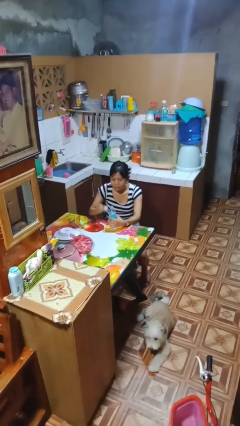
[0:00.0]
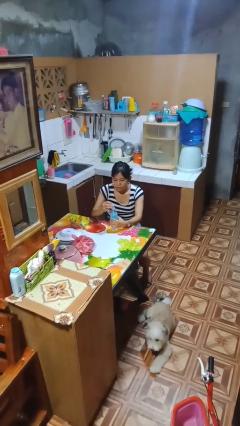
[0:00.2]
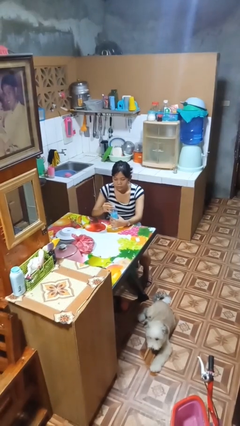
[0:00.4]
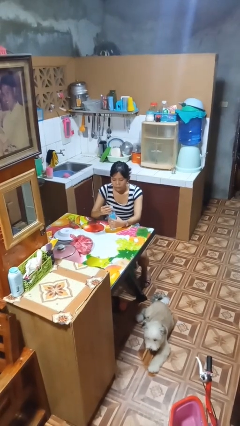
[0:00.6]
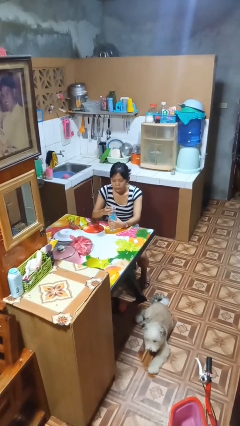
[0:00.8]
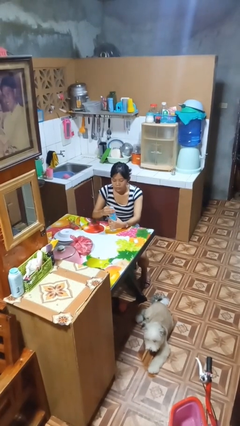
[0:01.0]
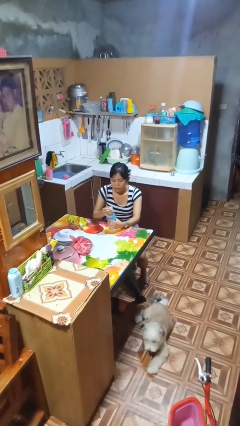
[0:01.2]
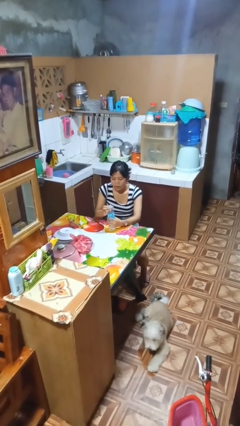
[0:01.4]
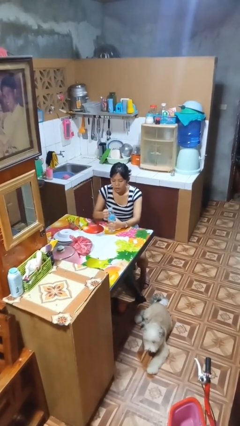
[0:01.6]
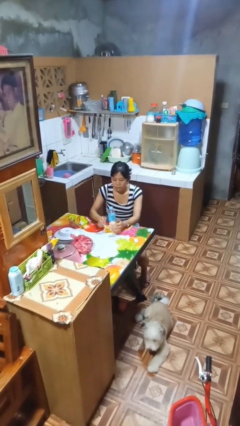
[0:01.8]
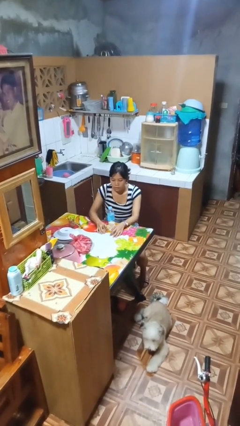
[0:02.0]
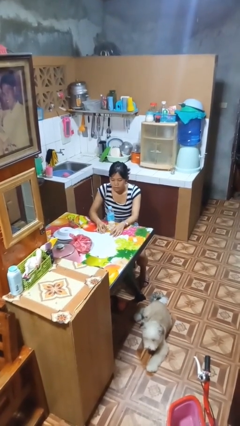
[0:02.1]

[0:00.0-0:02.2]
person screws lid to bottle

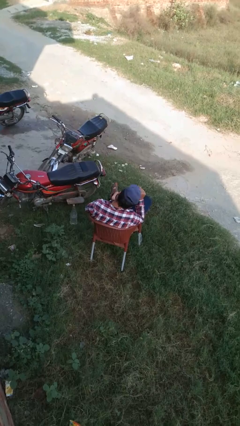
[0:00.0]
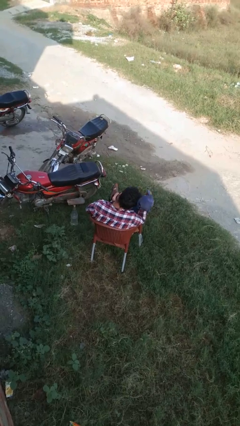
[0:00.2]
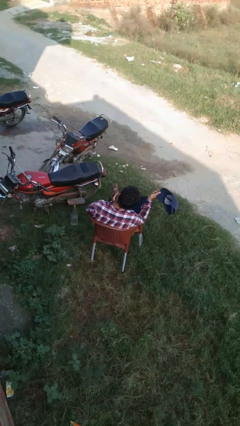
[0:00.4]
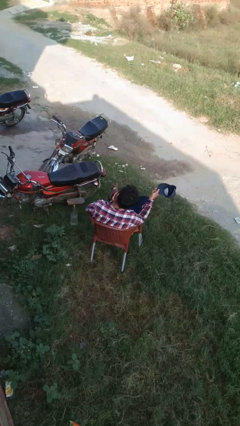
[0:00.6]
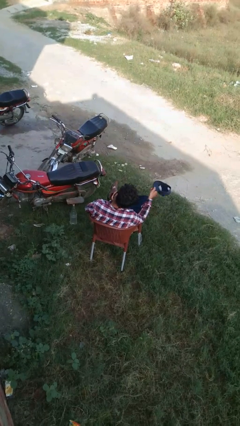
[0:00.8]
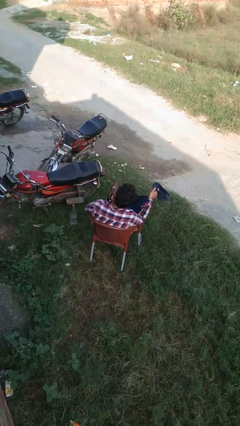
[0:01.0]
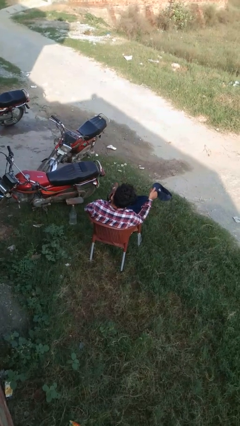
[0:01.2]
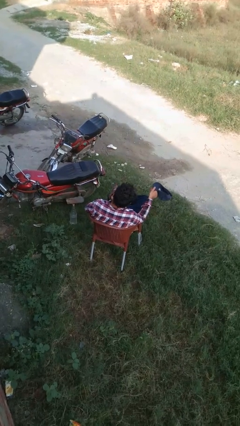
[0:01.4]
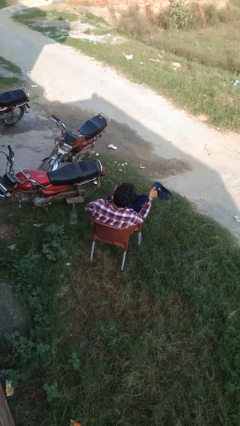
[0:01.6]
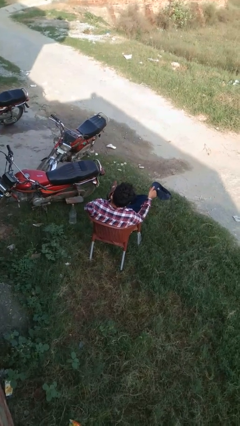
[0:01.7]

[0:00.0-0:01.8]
person takes off hat

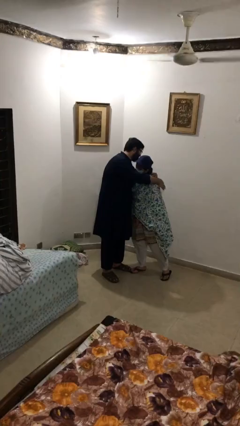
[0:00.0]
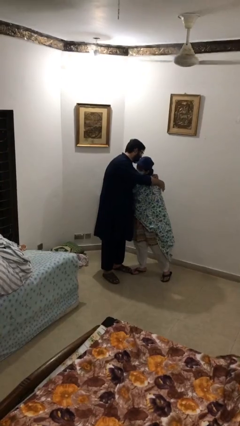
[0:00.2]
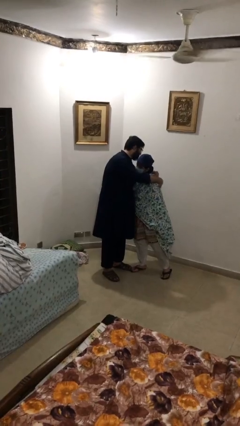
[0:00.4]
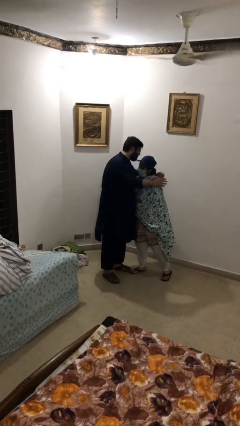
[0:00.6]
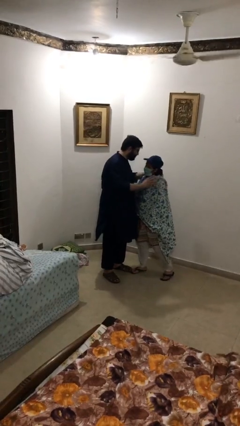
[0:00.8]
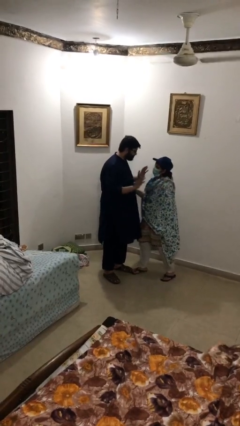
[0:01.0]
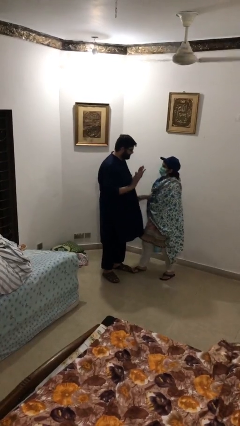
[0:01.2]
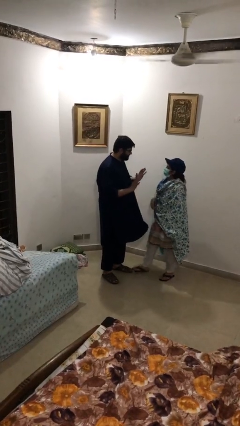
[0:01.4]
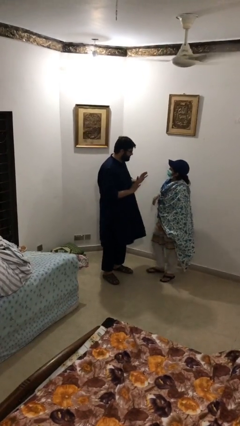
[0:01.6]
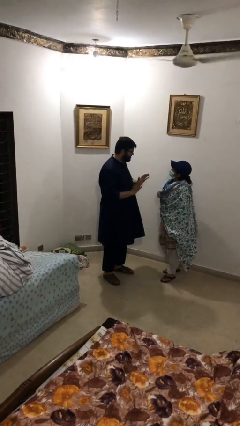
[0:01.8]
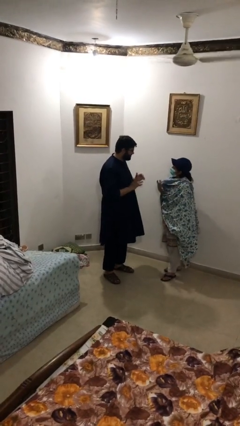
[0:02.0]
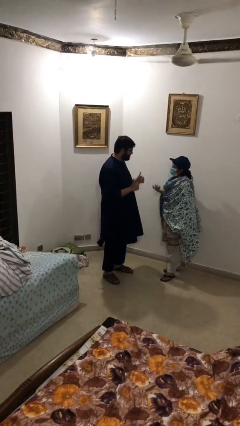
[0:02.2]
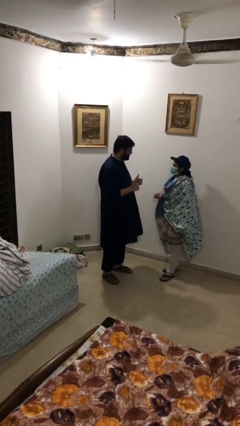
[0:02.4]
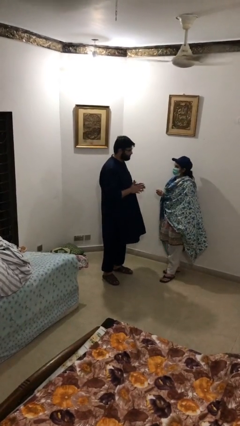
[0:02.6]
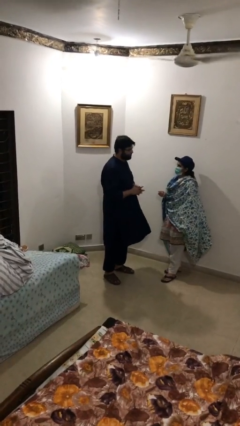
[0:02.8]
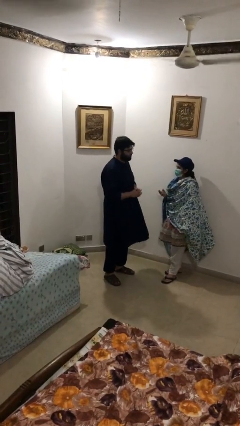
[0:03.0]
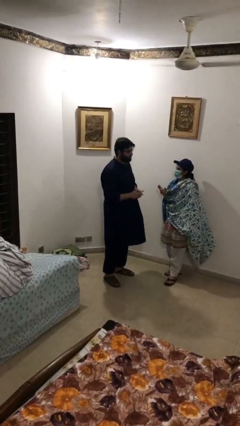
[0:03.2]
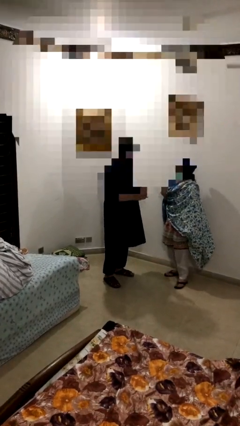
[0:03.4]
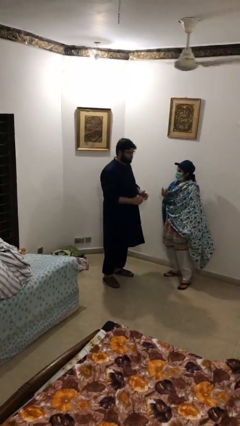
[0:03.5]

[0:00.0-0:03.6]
person talks to person

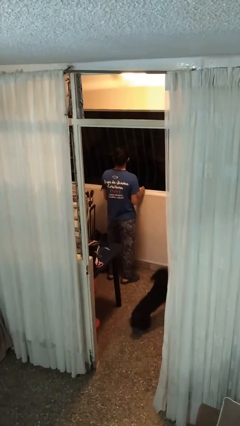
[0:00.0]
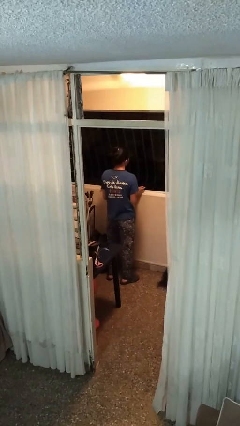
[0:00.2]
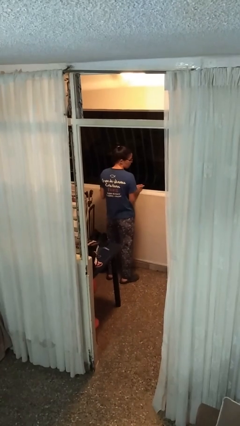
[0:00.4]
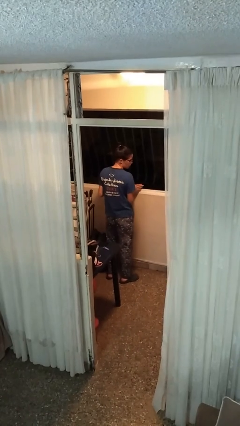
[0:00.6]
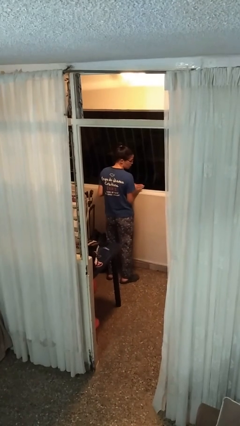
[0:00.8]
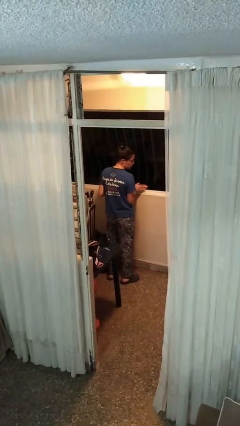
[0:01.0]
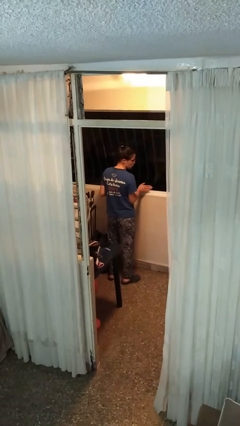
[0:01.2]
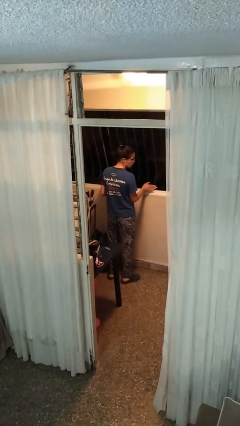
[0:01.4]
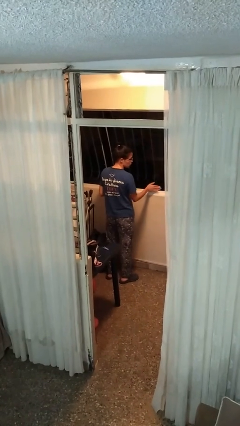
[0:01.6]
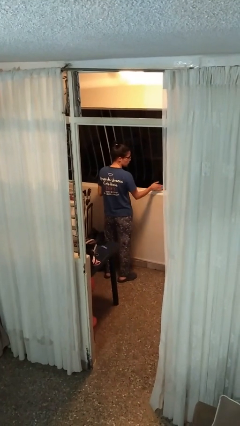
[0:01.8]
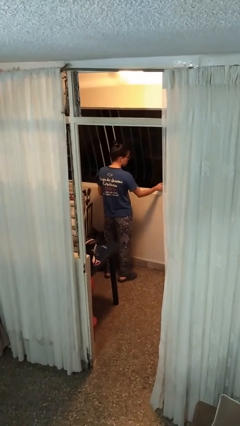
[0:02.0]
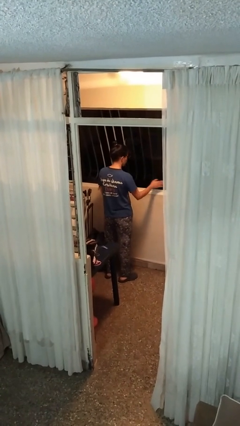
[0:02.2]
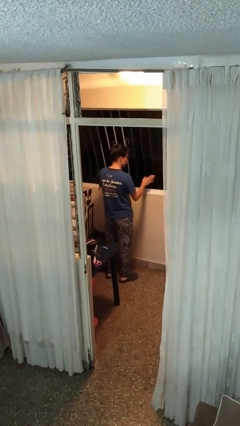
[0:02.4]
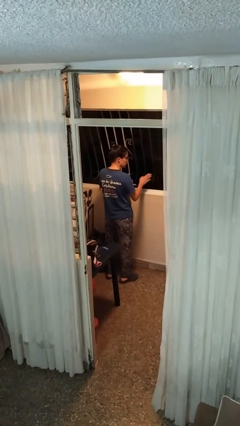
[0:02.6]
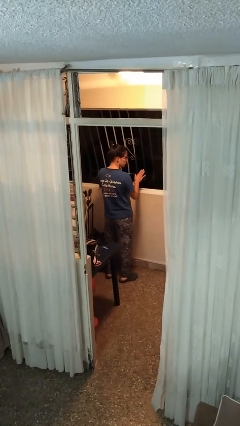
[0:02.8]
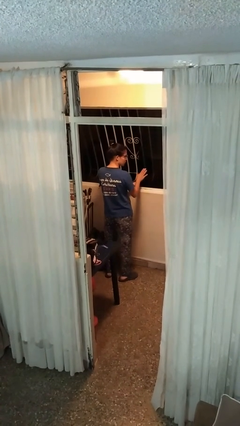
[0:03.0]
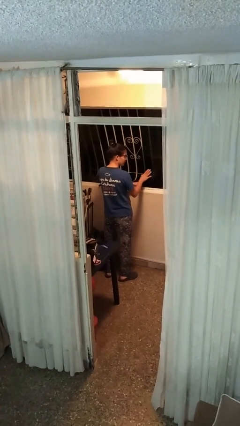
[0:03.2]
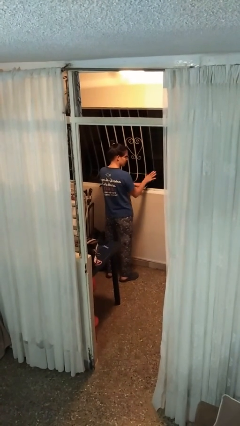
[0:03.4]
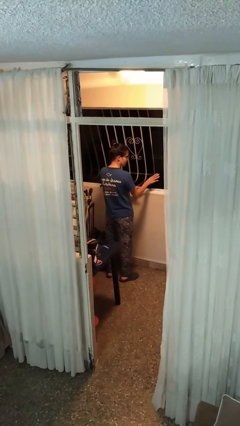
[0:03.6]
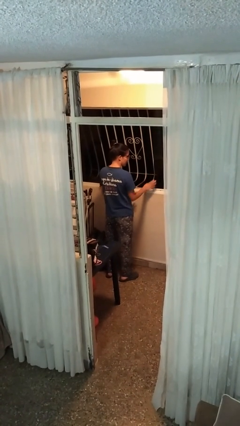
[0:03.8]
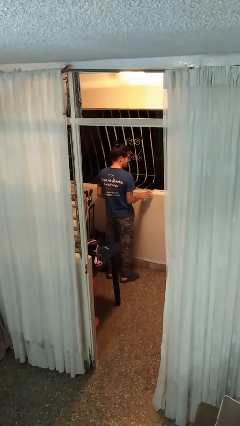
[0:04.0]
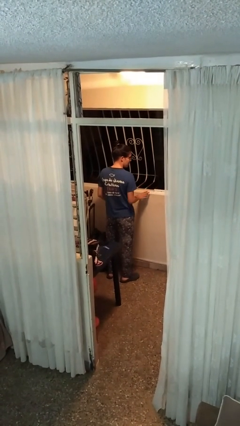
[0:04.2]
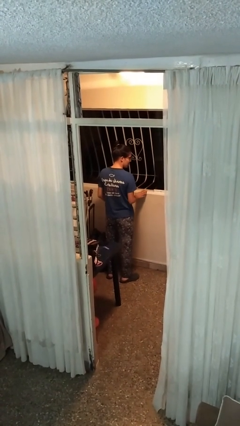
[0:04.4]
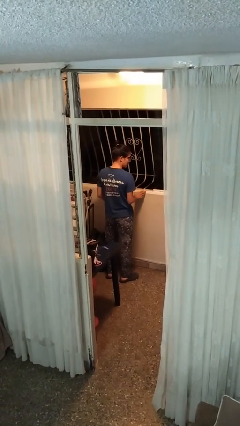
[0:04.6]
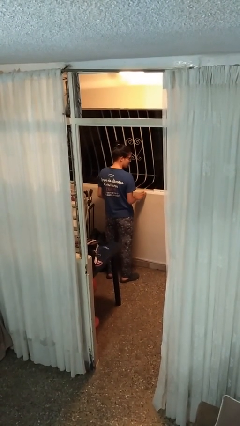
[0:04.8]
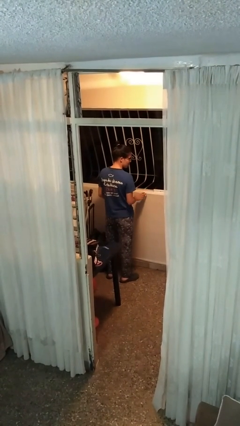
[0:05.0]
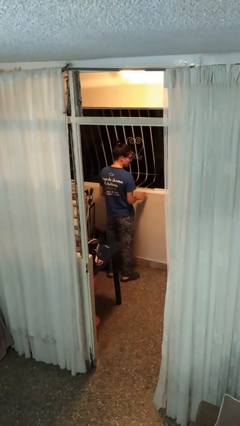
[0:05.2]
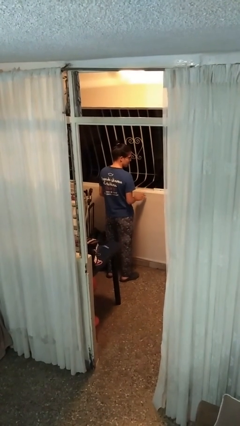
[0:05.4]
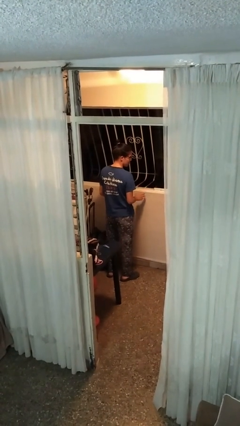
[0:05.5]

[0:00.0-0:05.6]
person opens home window

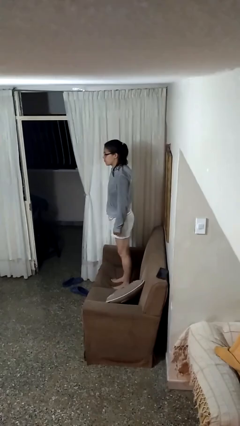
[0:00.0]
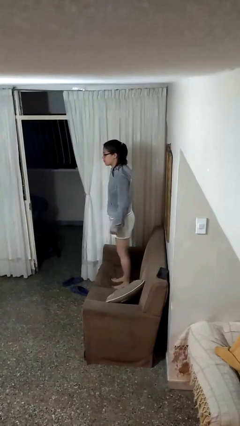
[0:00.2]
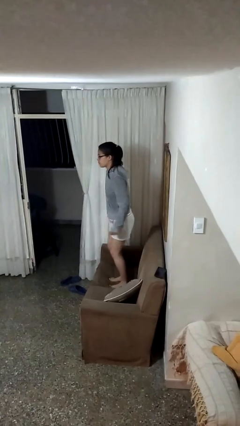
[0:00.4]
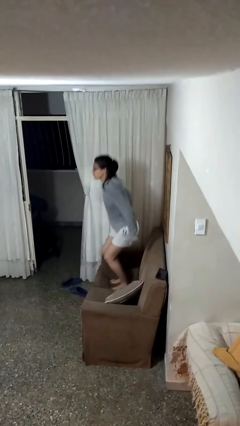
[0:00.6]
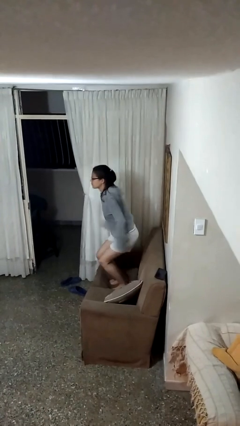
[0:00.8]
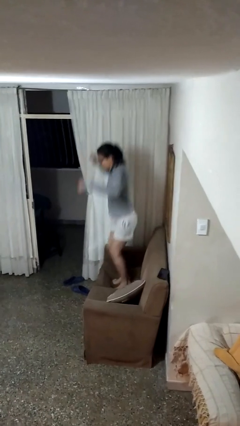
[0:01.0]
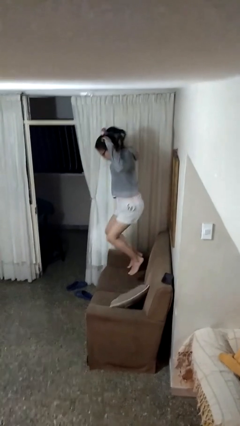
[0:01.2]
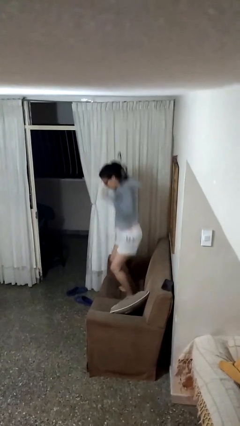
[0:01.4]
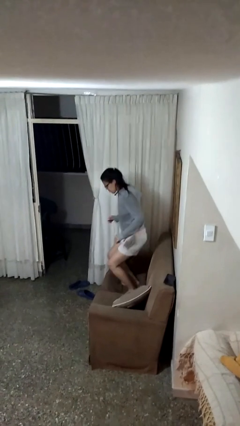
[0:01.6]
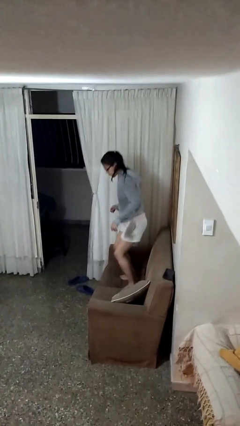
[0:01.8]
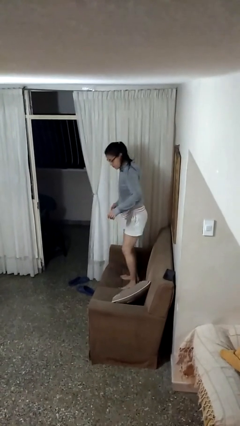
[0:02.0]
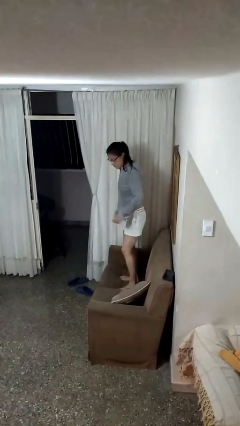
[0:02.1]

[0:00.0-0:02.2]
person jumps on couch

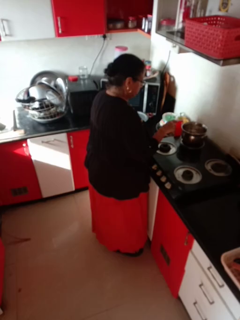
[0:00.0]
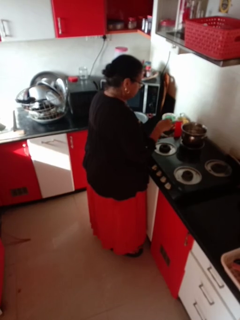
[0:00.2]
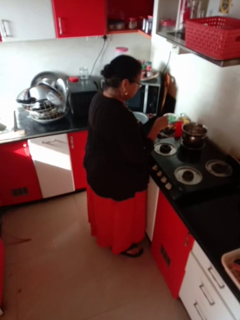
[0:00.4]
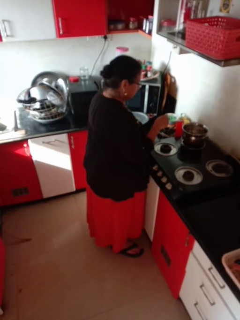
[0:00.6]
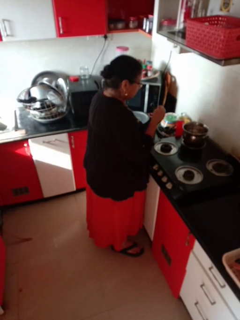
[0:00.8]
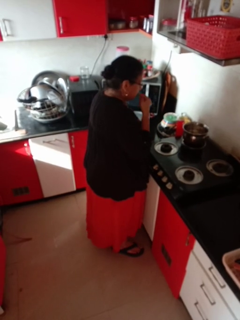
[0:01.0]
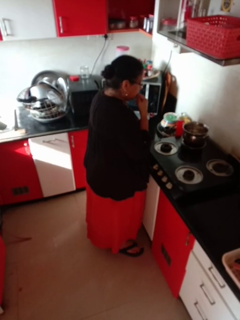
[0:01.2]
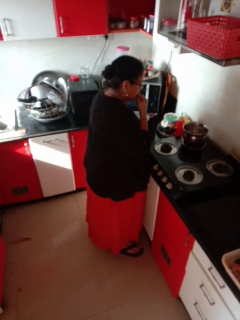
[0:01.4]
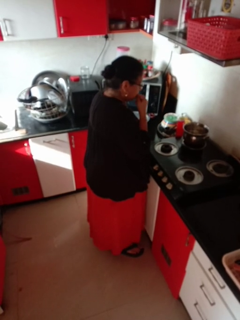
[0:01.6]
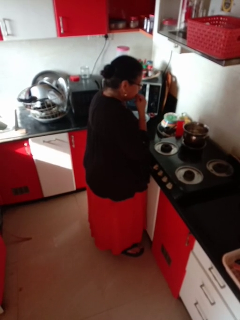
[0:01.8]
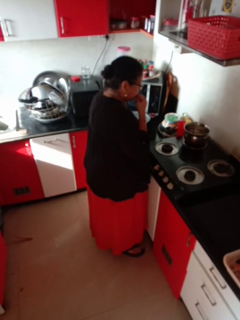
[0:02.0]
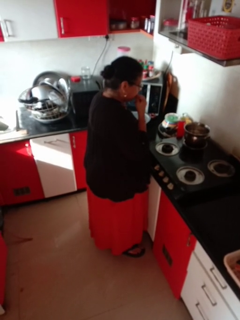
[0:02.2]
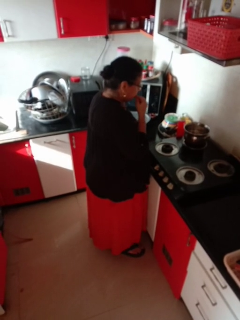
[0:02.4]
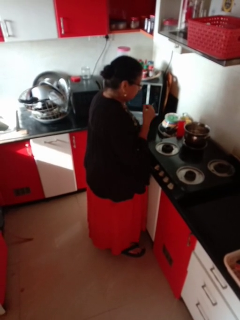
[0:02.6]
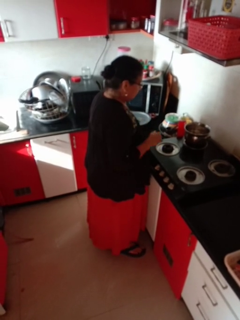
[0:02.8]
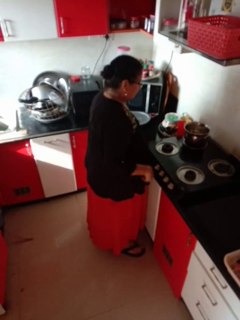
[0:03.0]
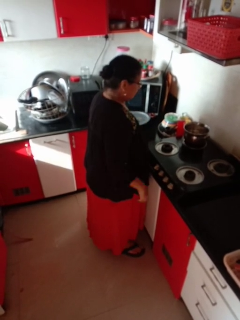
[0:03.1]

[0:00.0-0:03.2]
person burns hand
